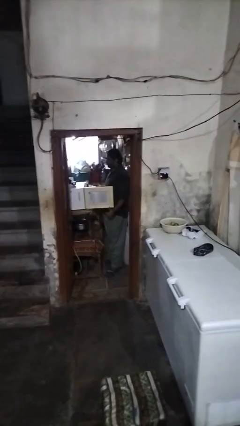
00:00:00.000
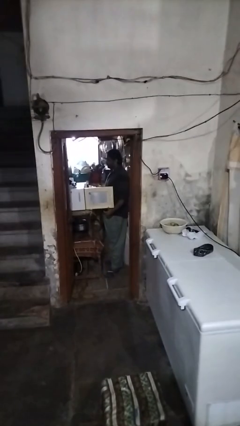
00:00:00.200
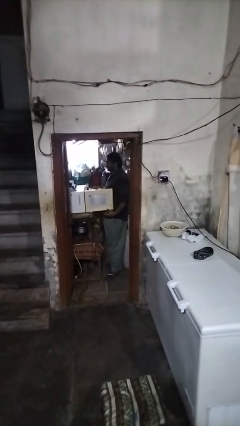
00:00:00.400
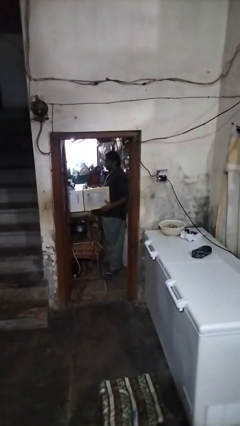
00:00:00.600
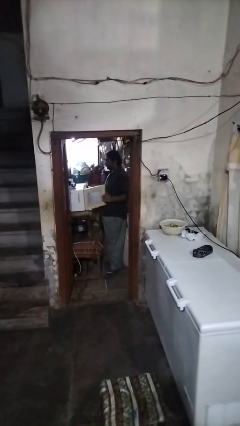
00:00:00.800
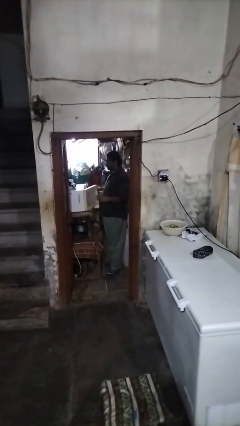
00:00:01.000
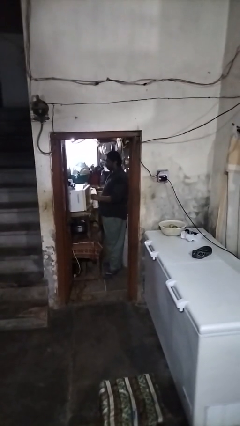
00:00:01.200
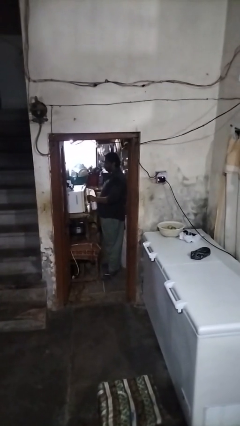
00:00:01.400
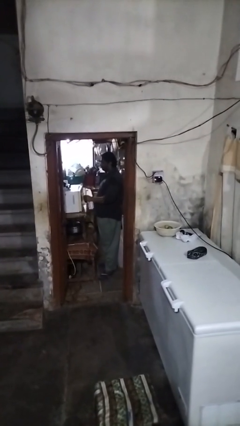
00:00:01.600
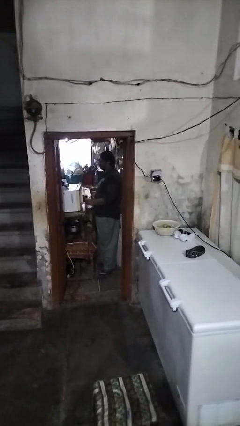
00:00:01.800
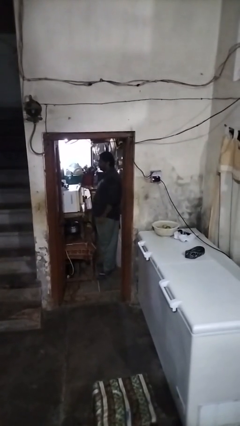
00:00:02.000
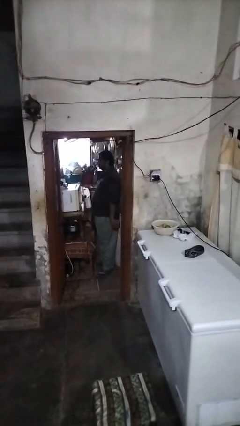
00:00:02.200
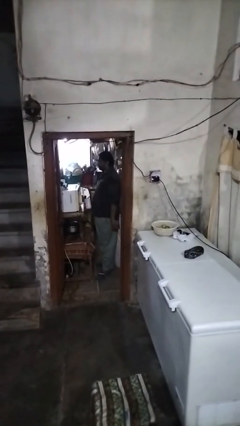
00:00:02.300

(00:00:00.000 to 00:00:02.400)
person closes oven door

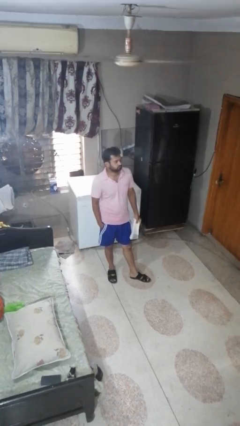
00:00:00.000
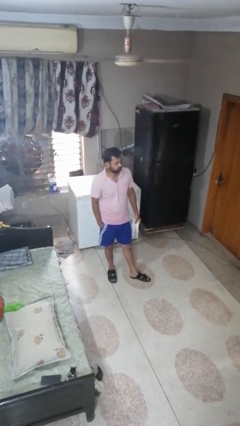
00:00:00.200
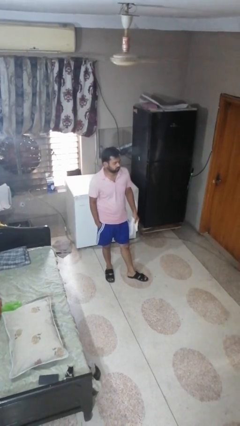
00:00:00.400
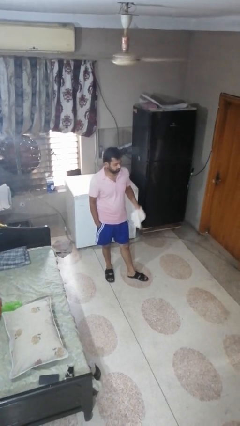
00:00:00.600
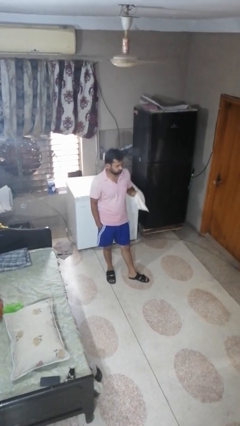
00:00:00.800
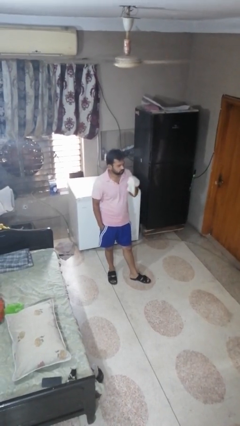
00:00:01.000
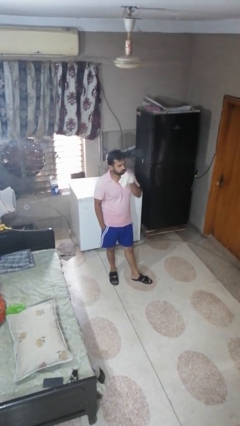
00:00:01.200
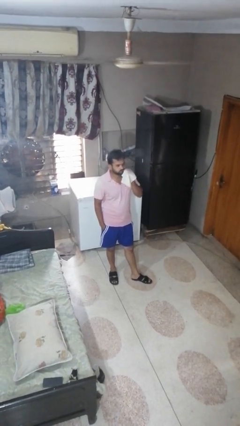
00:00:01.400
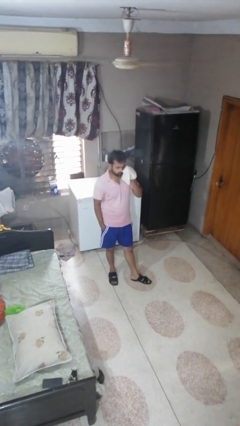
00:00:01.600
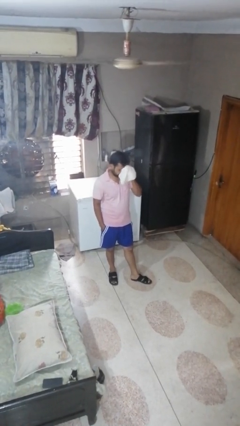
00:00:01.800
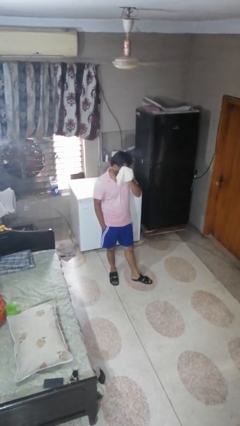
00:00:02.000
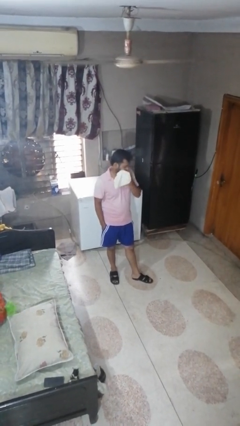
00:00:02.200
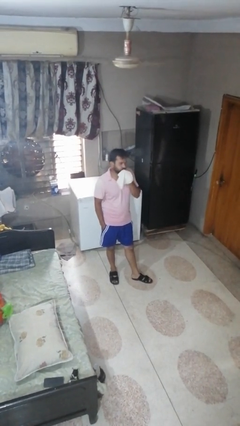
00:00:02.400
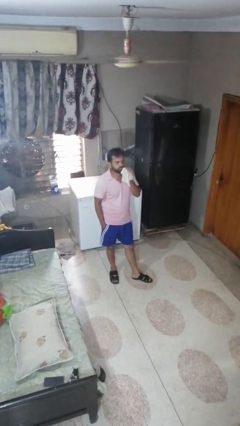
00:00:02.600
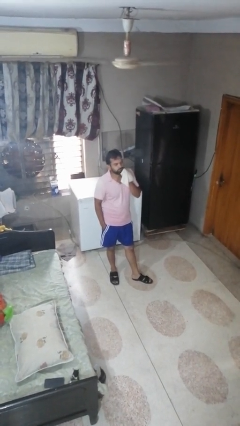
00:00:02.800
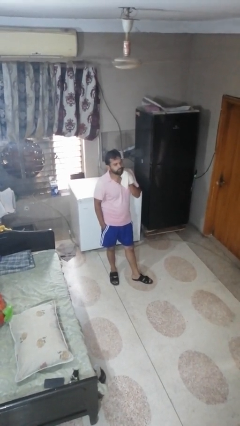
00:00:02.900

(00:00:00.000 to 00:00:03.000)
person wipes mouth with napkin

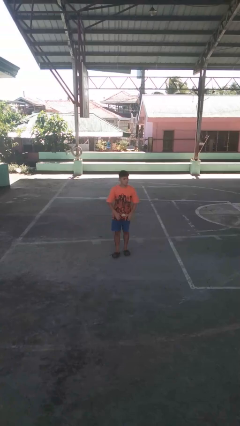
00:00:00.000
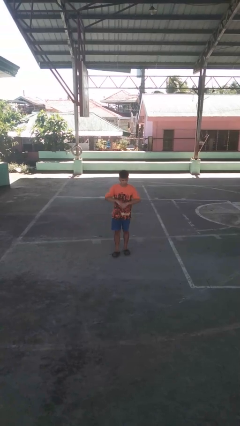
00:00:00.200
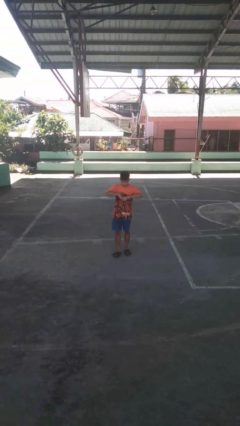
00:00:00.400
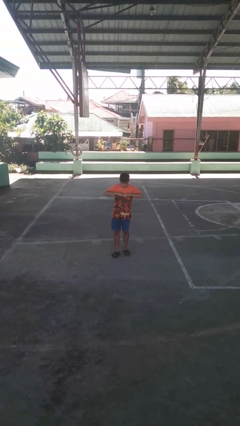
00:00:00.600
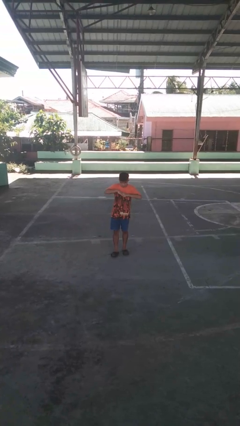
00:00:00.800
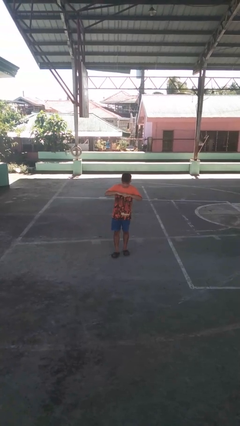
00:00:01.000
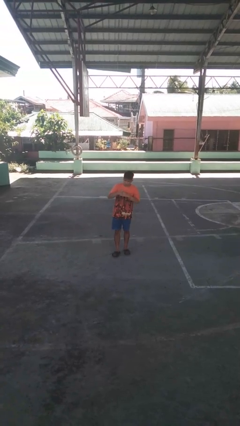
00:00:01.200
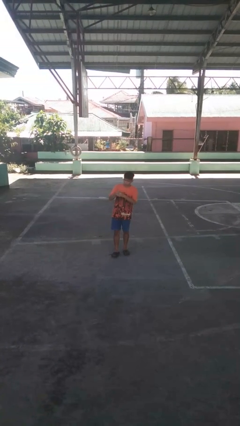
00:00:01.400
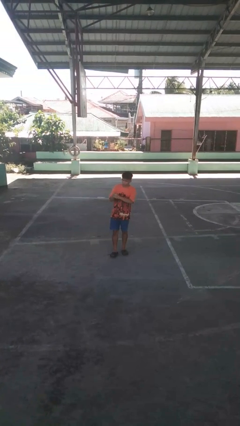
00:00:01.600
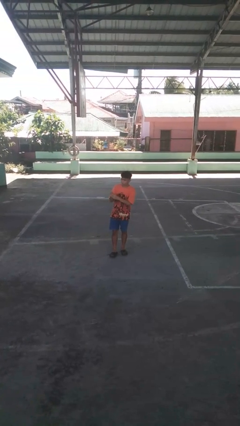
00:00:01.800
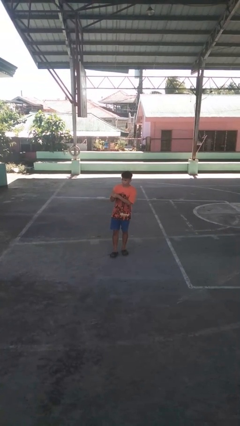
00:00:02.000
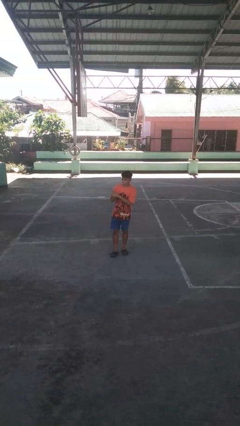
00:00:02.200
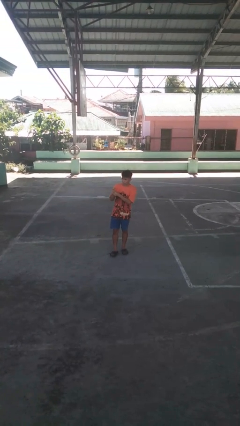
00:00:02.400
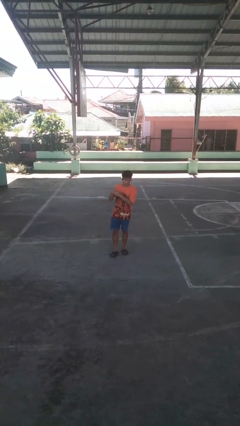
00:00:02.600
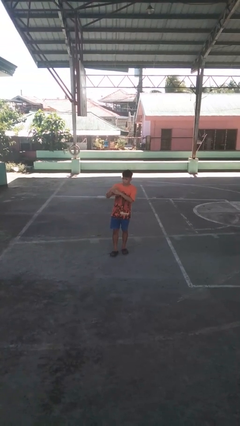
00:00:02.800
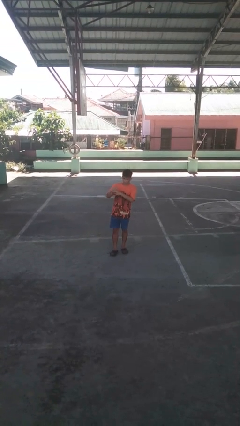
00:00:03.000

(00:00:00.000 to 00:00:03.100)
person cracks knuckles

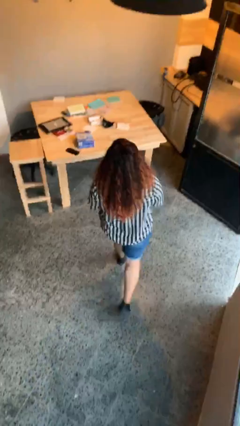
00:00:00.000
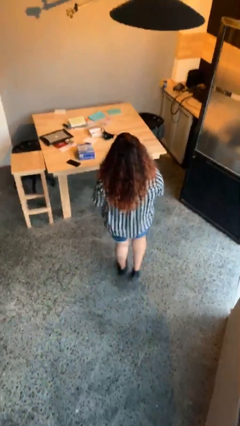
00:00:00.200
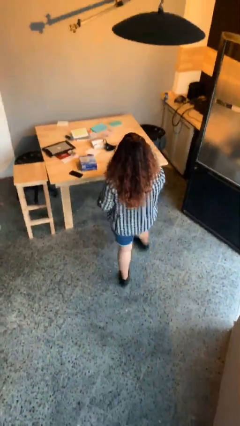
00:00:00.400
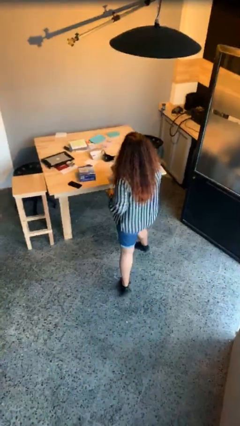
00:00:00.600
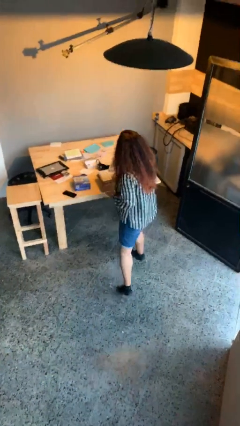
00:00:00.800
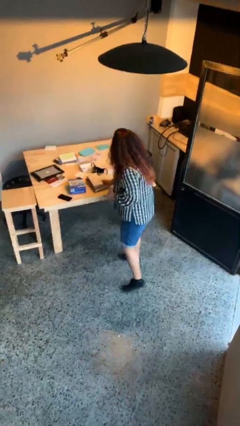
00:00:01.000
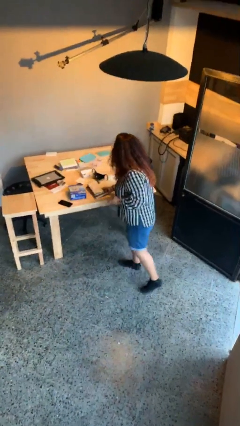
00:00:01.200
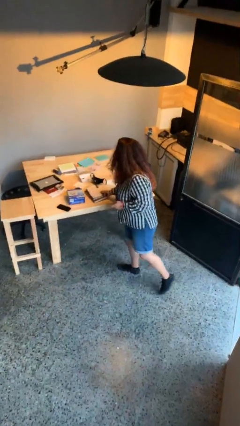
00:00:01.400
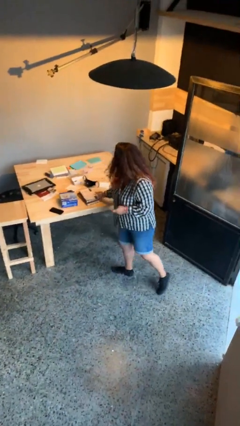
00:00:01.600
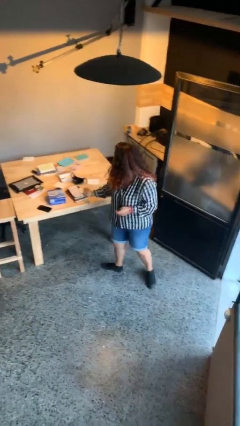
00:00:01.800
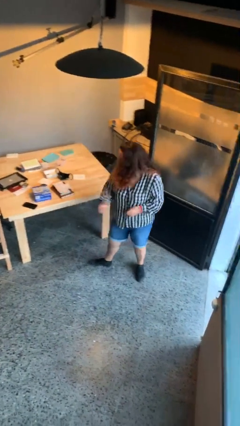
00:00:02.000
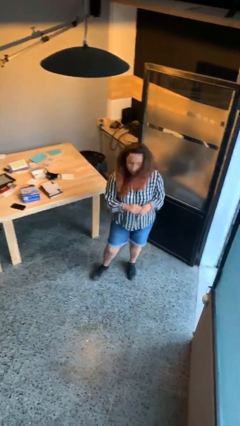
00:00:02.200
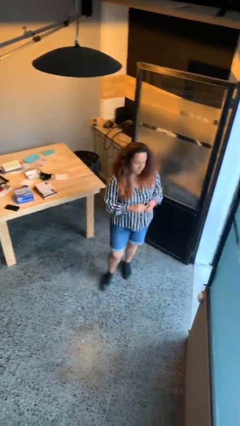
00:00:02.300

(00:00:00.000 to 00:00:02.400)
person puts down object on table

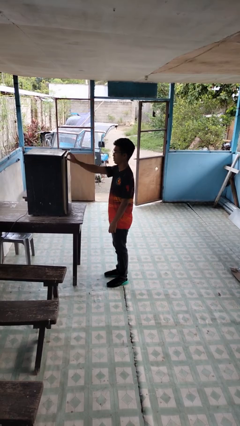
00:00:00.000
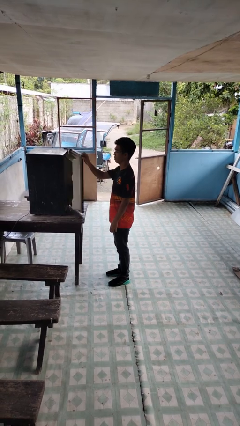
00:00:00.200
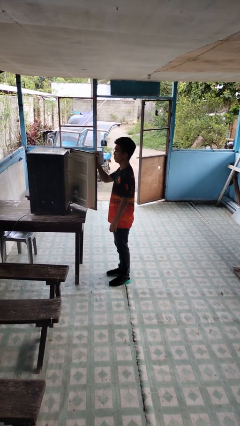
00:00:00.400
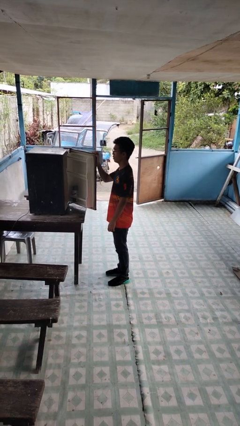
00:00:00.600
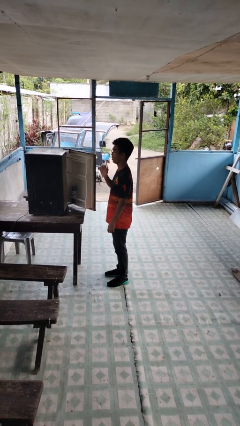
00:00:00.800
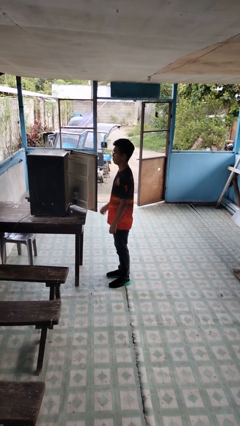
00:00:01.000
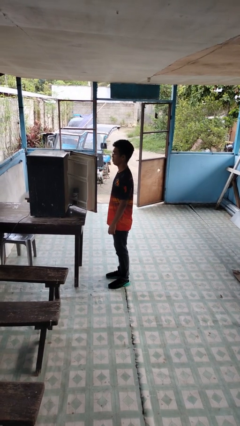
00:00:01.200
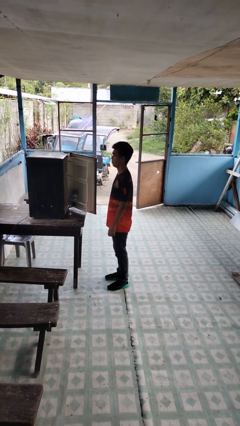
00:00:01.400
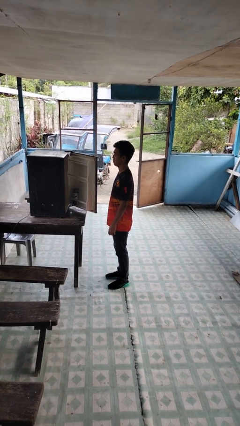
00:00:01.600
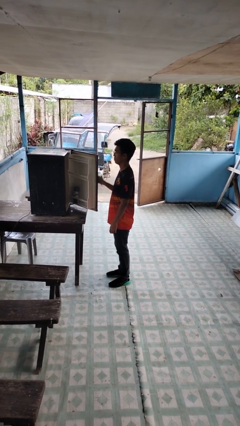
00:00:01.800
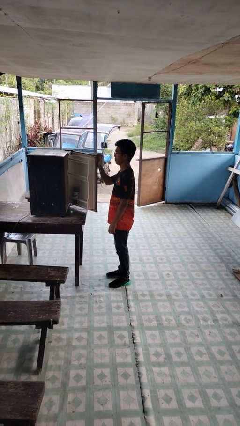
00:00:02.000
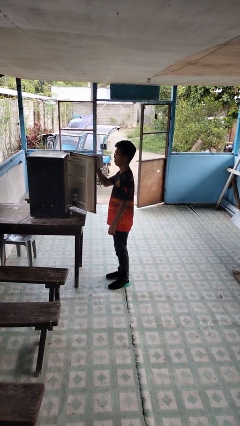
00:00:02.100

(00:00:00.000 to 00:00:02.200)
person opens refrigerator

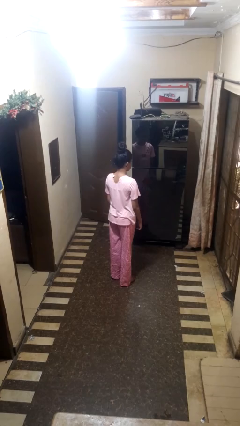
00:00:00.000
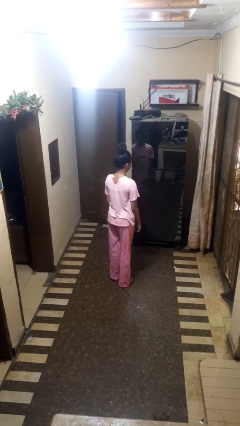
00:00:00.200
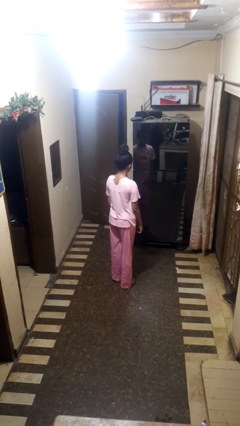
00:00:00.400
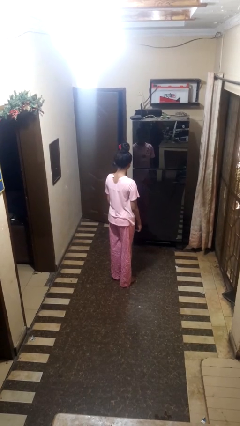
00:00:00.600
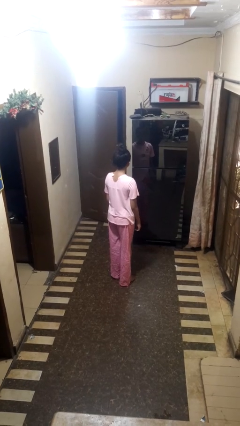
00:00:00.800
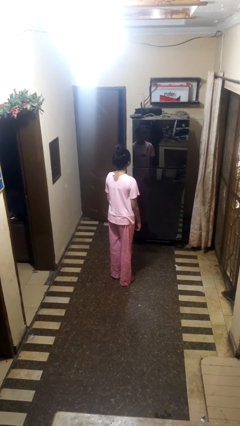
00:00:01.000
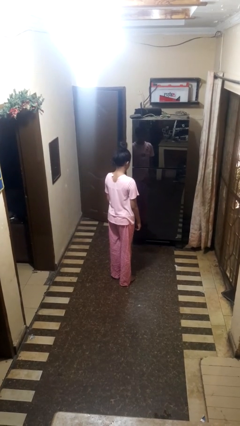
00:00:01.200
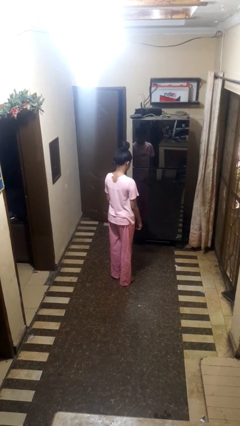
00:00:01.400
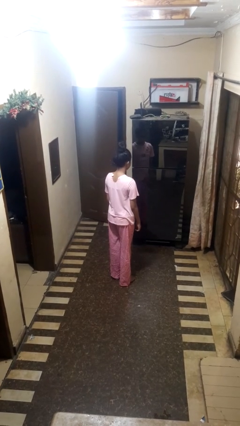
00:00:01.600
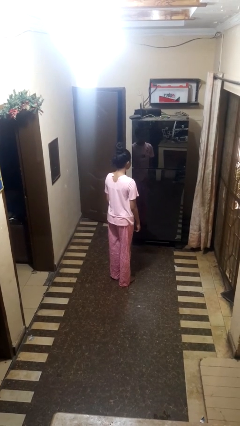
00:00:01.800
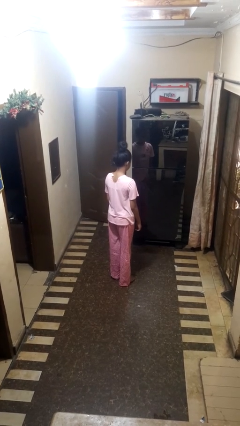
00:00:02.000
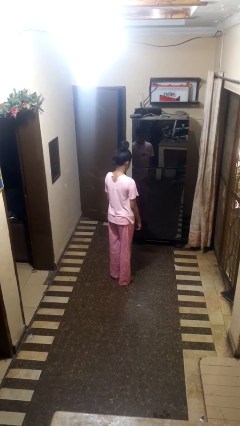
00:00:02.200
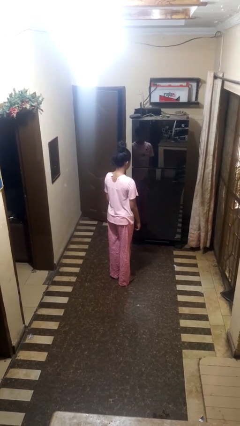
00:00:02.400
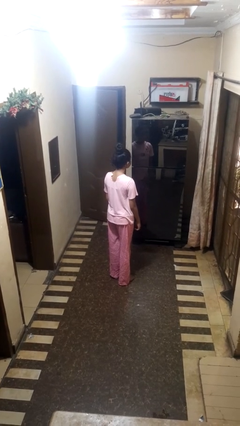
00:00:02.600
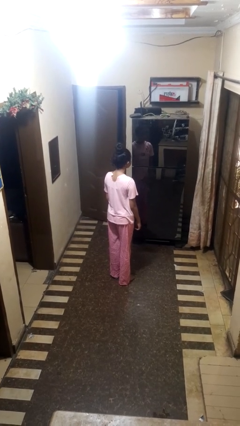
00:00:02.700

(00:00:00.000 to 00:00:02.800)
person shakes head

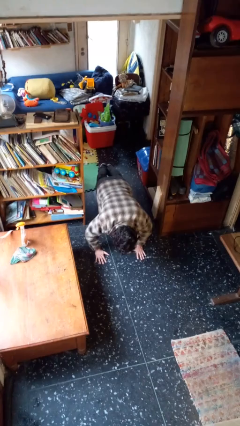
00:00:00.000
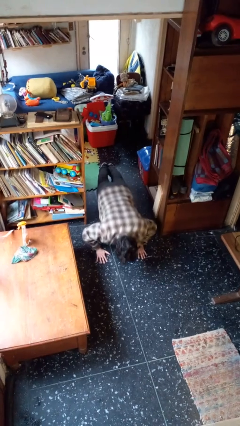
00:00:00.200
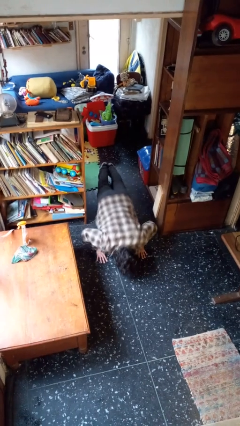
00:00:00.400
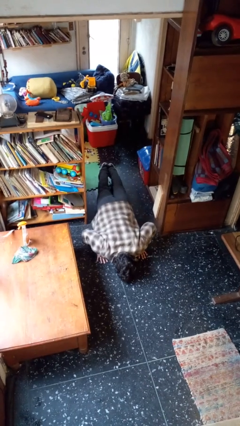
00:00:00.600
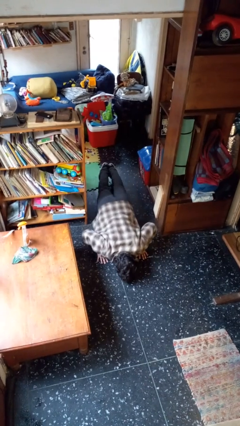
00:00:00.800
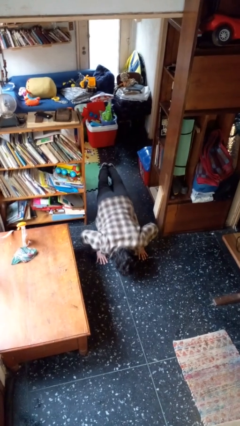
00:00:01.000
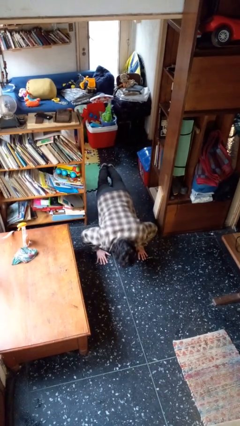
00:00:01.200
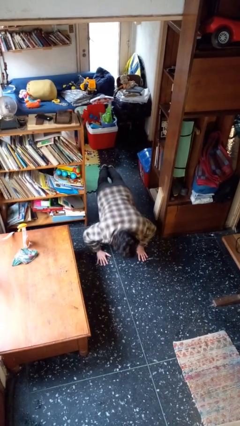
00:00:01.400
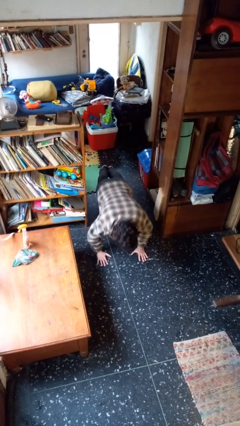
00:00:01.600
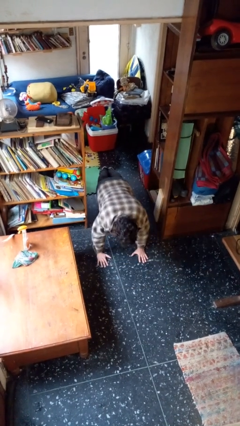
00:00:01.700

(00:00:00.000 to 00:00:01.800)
person exercises with pushup
